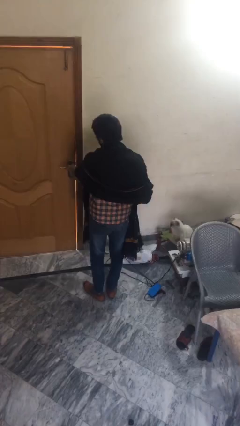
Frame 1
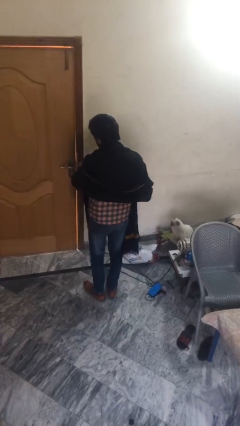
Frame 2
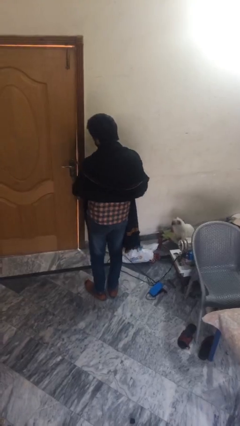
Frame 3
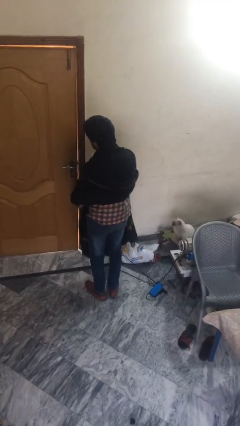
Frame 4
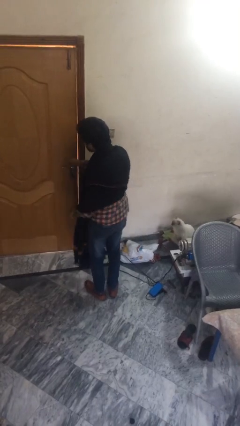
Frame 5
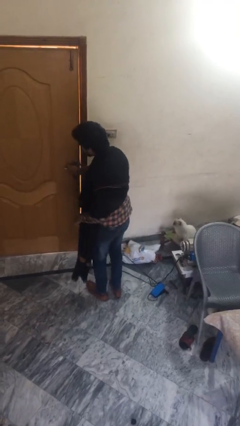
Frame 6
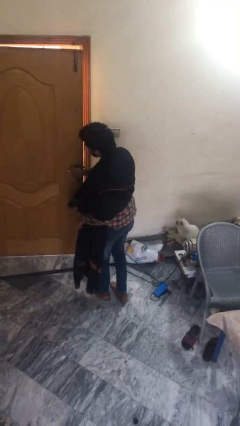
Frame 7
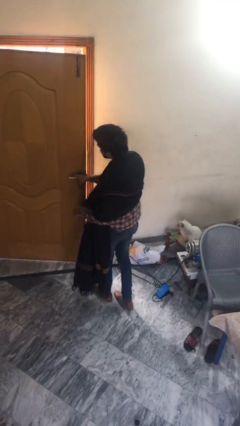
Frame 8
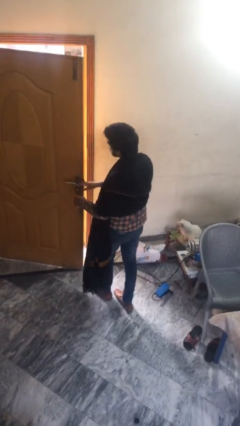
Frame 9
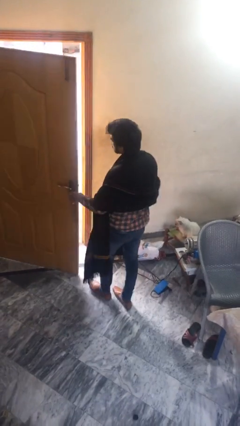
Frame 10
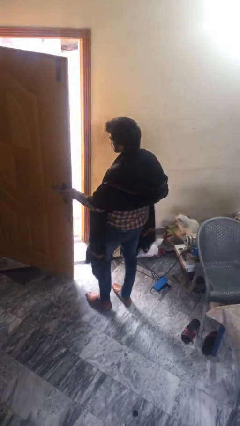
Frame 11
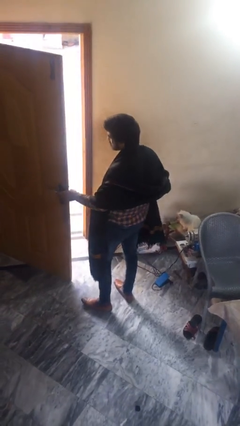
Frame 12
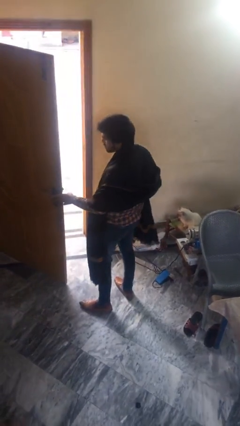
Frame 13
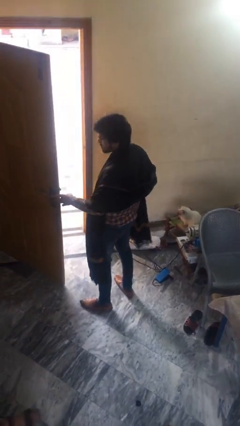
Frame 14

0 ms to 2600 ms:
person opens facility door

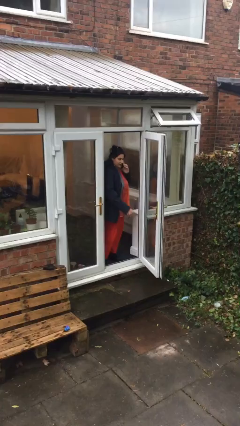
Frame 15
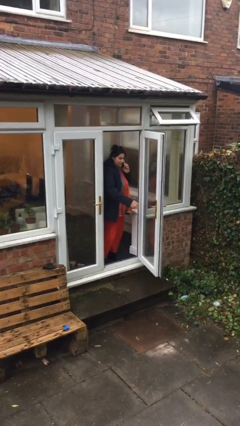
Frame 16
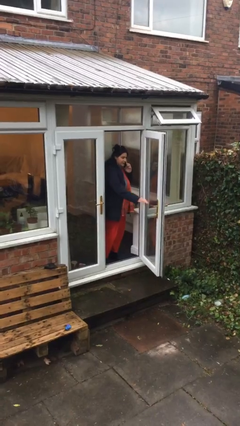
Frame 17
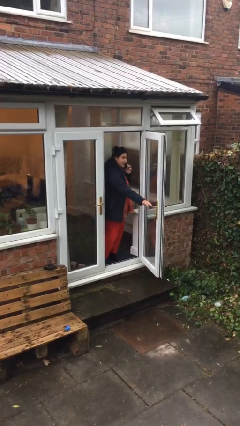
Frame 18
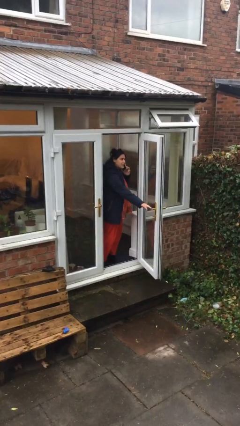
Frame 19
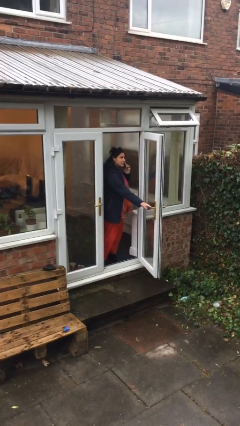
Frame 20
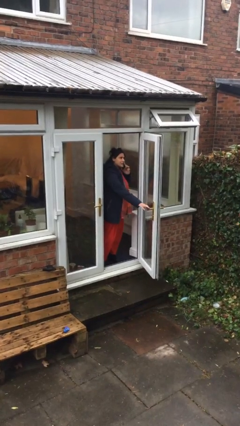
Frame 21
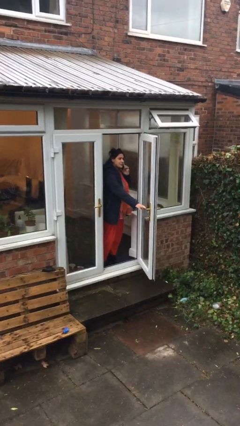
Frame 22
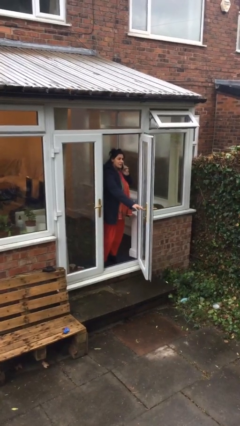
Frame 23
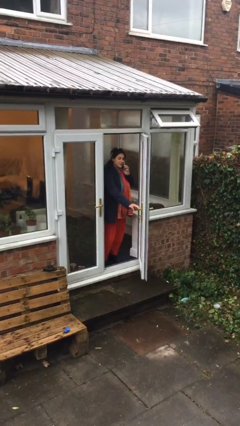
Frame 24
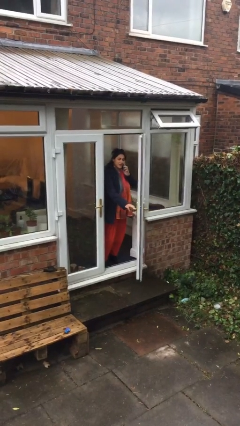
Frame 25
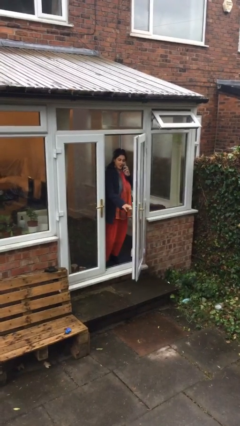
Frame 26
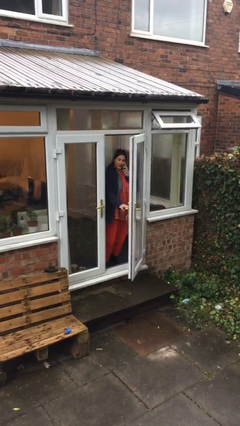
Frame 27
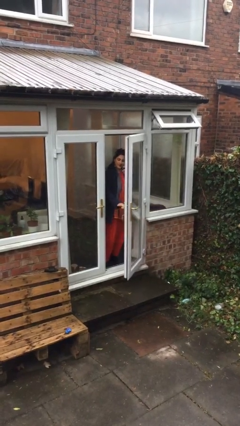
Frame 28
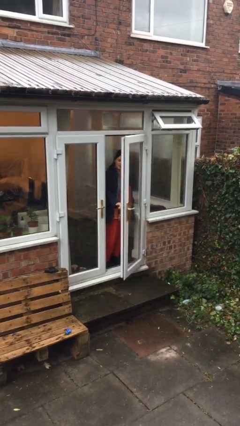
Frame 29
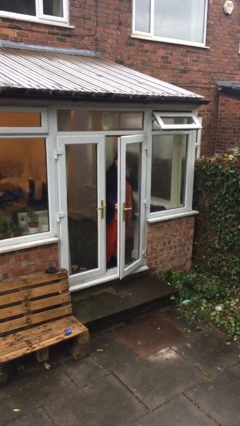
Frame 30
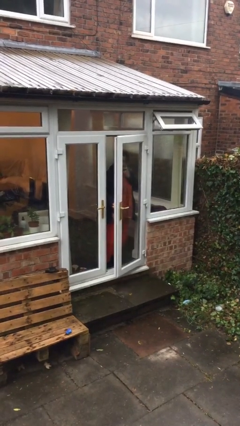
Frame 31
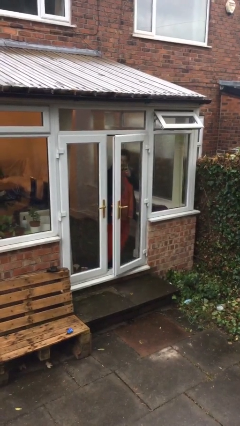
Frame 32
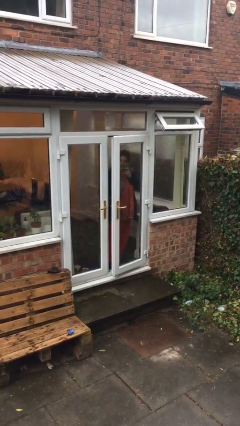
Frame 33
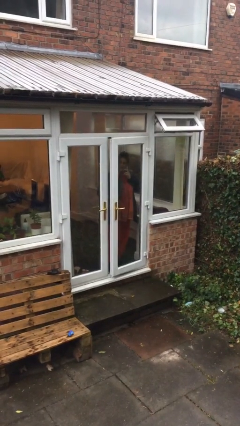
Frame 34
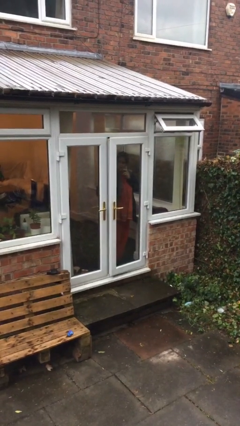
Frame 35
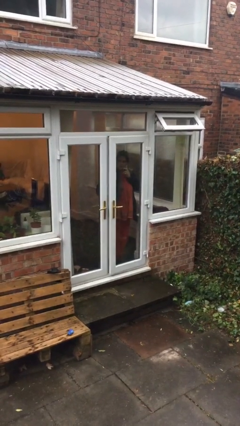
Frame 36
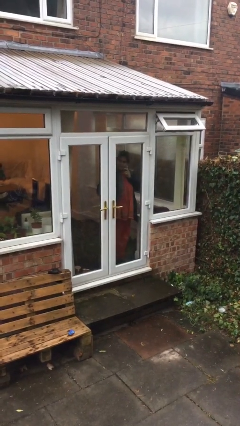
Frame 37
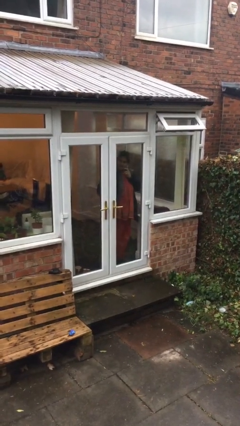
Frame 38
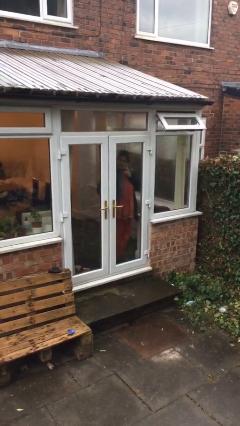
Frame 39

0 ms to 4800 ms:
person closes facility door

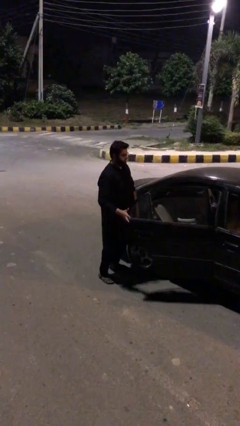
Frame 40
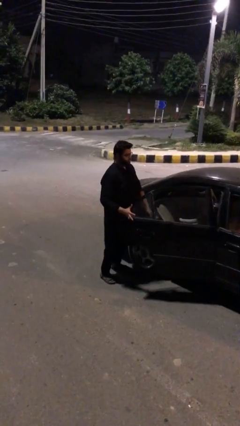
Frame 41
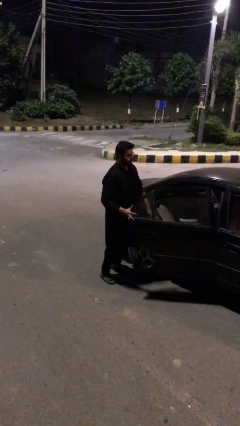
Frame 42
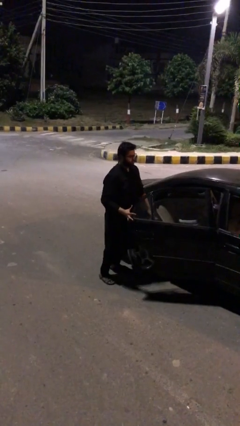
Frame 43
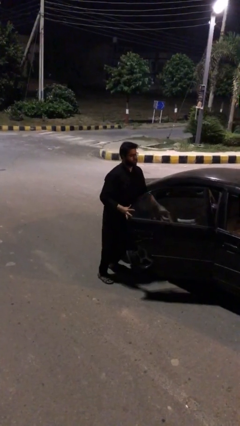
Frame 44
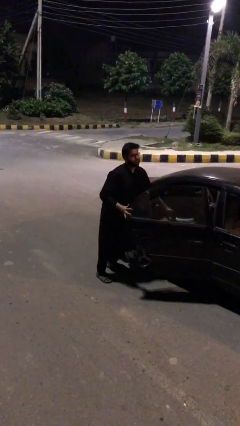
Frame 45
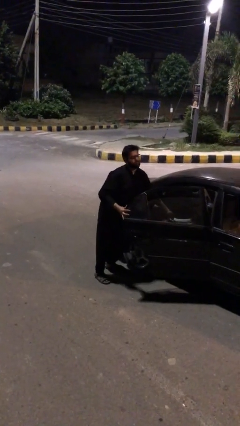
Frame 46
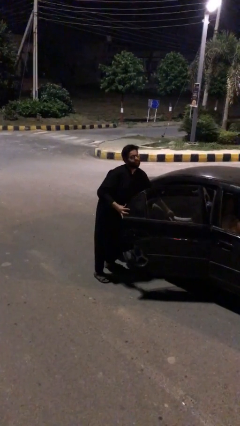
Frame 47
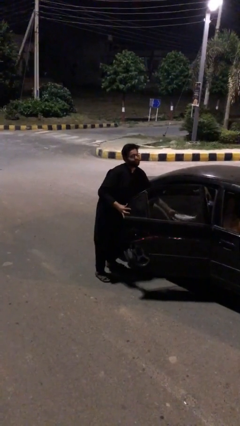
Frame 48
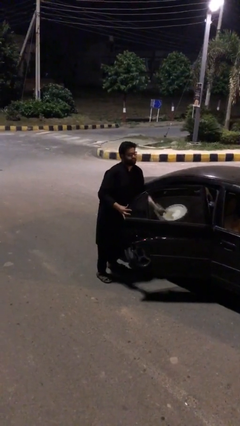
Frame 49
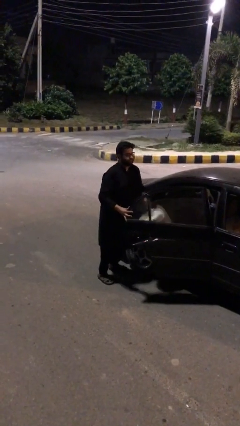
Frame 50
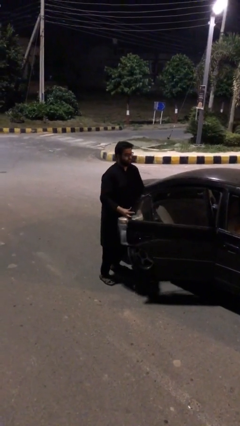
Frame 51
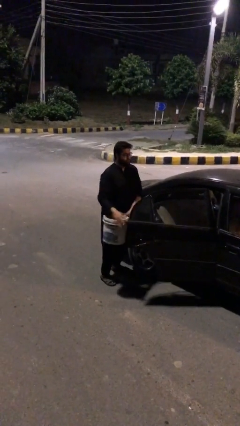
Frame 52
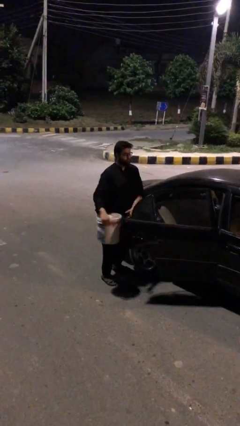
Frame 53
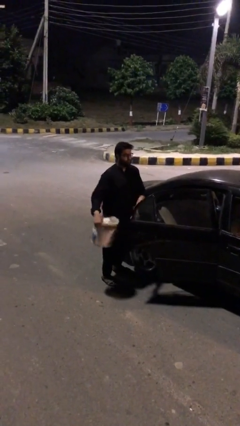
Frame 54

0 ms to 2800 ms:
person unloads car

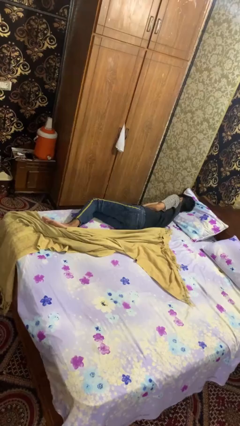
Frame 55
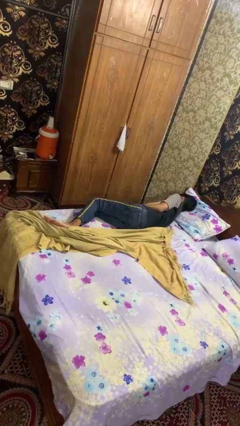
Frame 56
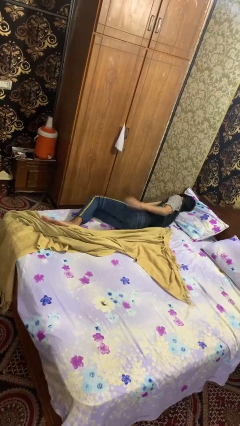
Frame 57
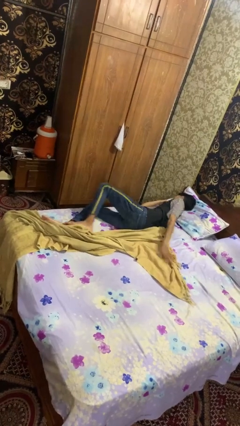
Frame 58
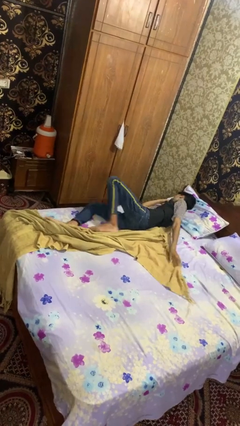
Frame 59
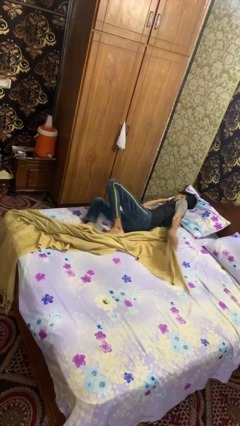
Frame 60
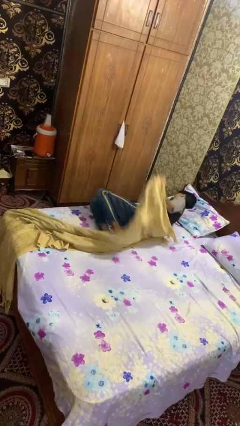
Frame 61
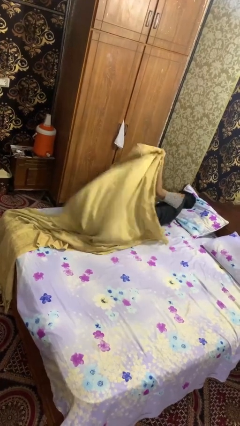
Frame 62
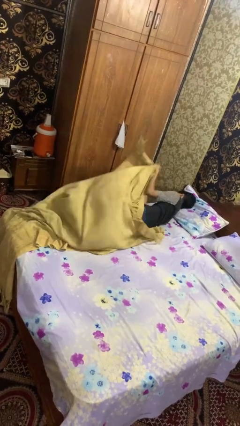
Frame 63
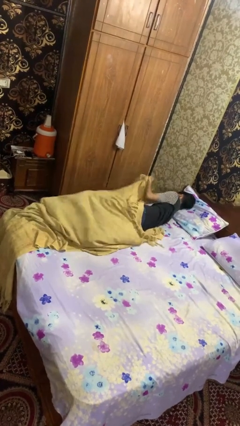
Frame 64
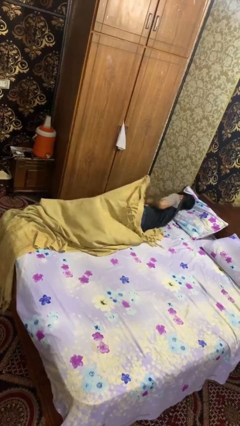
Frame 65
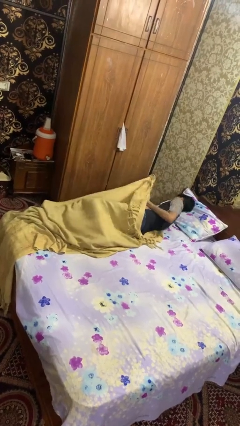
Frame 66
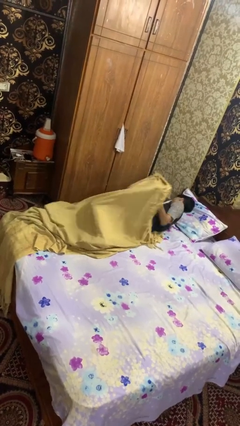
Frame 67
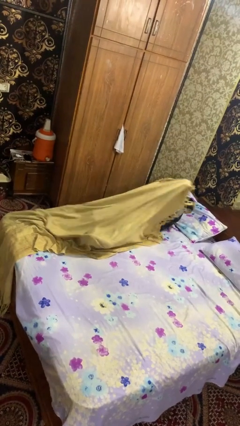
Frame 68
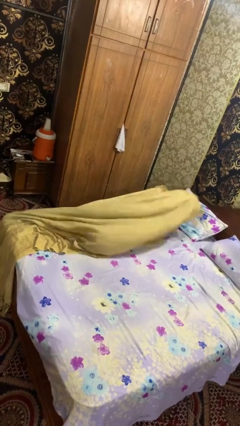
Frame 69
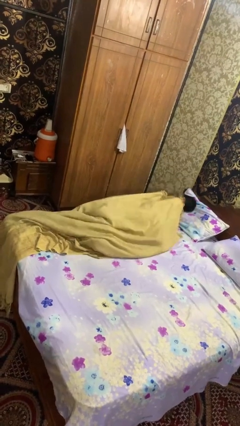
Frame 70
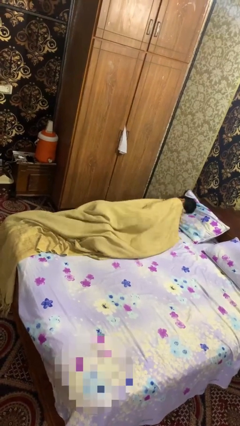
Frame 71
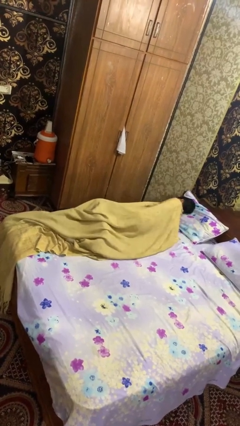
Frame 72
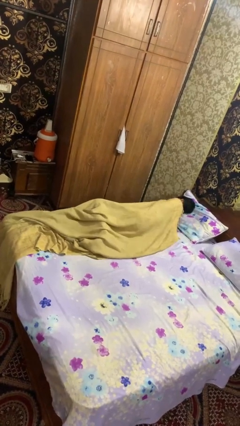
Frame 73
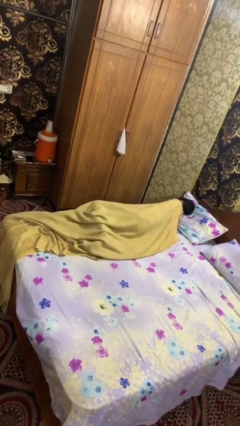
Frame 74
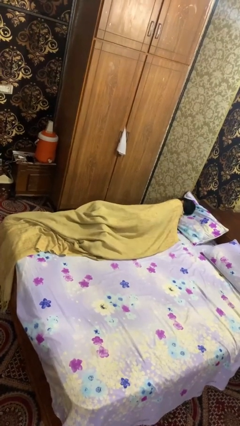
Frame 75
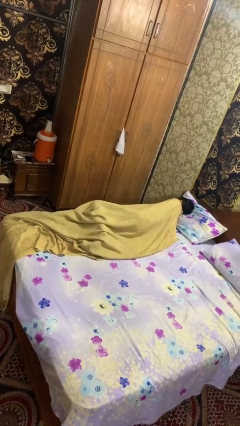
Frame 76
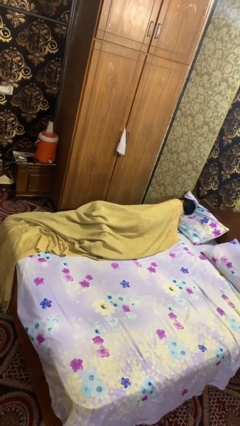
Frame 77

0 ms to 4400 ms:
person covers with bedsheets

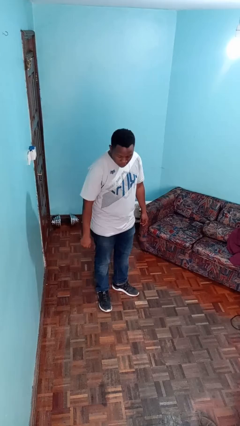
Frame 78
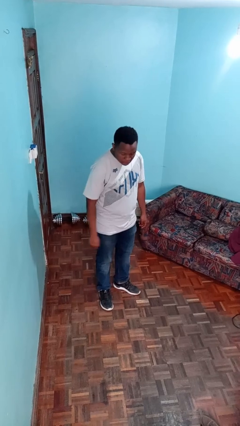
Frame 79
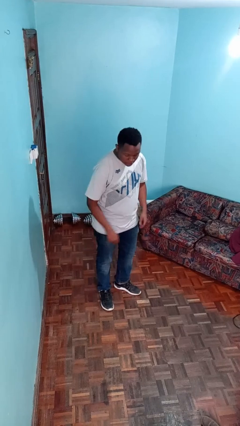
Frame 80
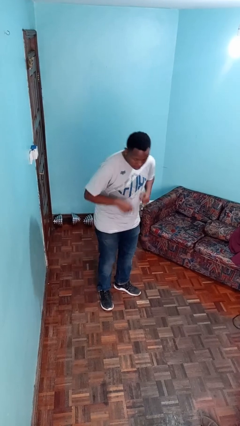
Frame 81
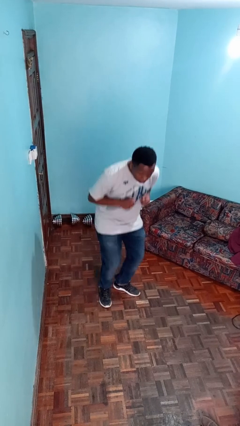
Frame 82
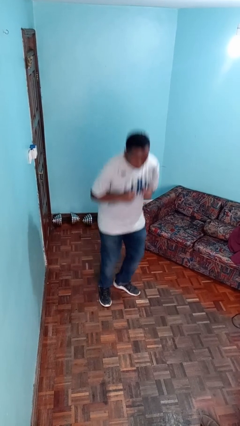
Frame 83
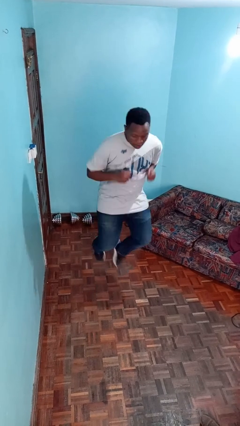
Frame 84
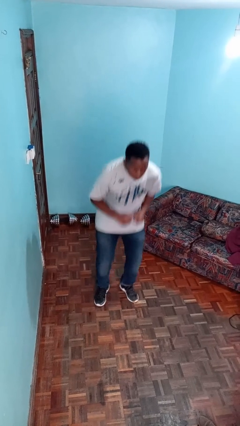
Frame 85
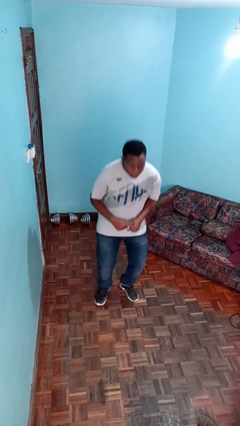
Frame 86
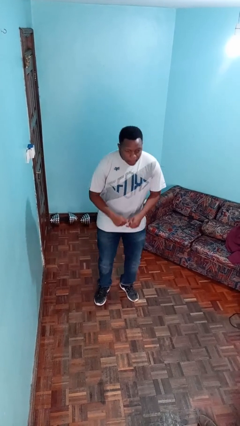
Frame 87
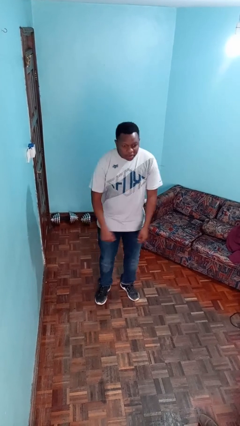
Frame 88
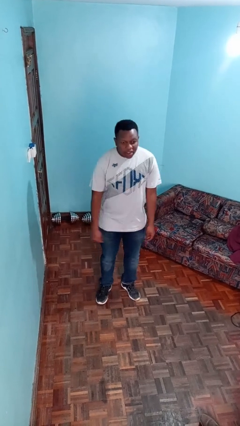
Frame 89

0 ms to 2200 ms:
person jumps

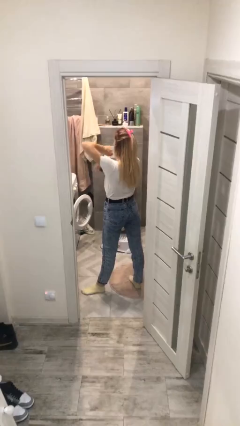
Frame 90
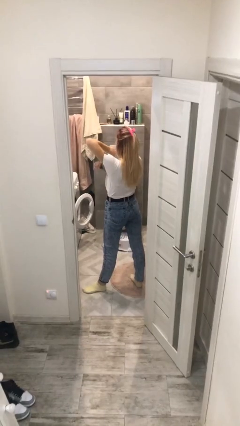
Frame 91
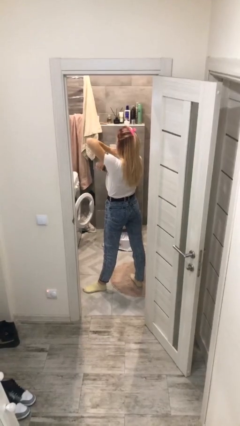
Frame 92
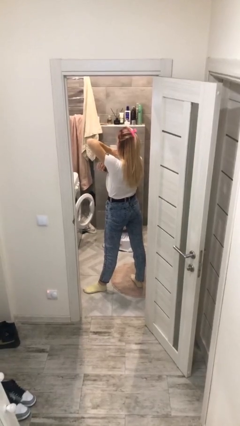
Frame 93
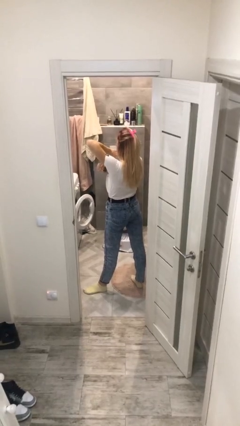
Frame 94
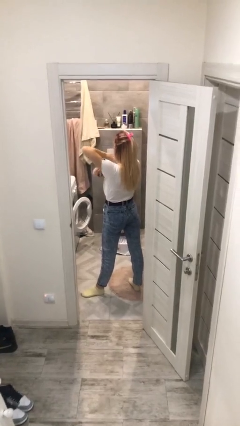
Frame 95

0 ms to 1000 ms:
person applies deodorant
